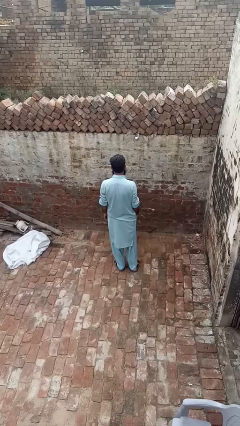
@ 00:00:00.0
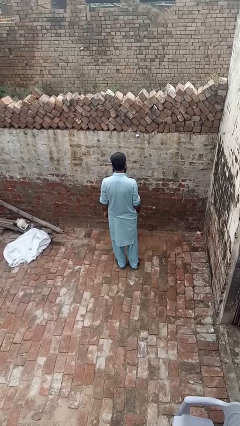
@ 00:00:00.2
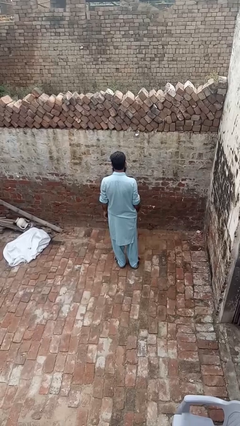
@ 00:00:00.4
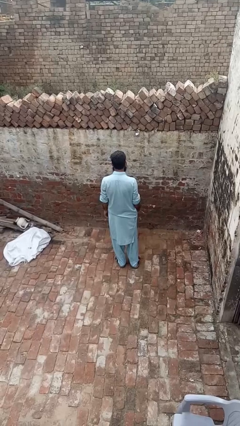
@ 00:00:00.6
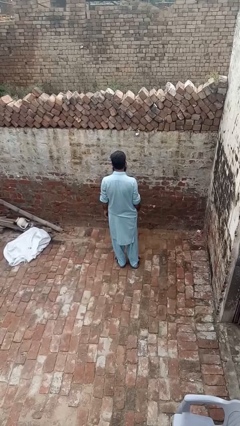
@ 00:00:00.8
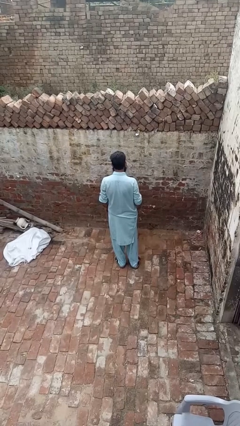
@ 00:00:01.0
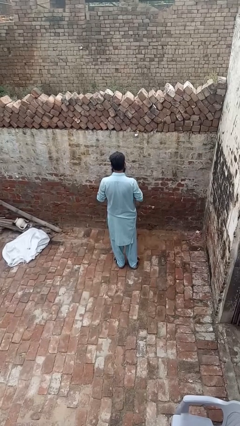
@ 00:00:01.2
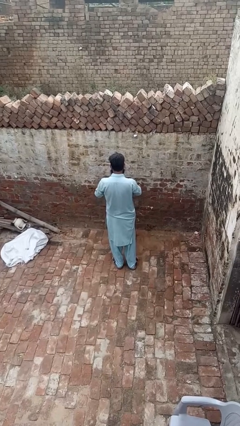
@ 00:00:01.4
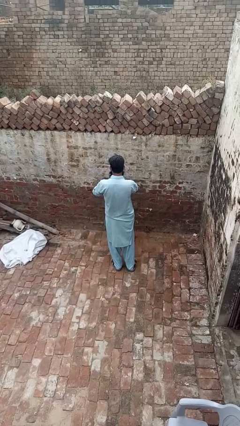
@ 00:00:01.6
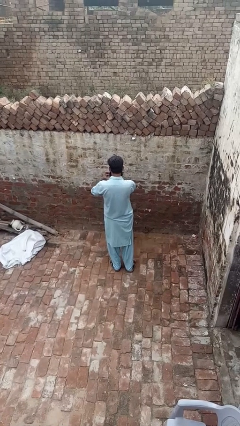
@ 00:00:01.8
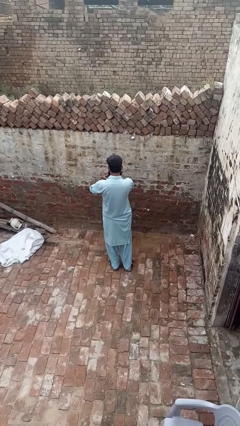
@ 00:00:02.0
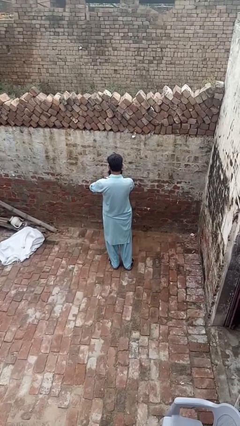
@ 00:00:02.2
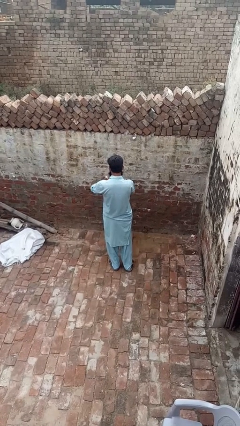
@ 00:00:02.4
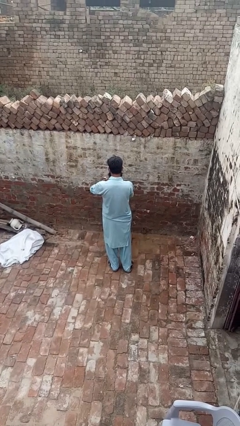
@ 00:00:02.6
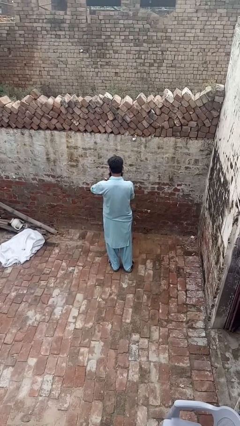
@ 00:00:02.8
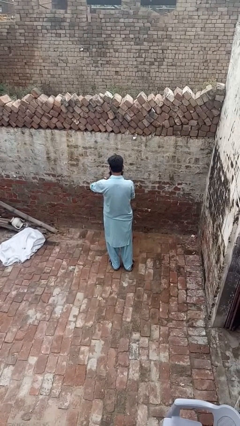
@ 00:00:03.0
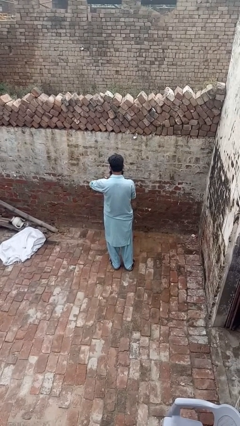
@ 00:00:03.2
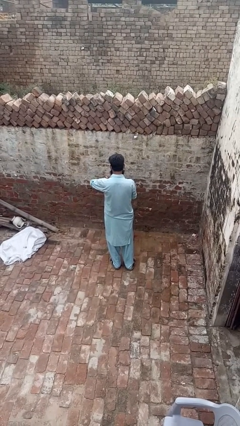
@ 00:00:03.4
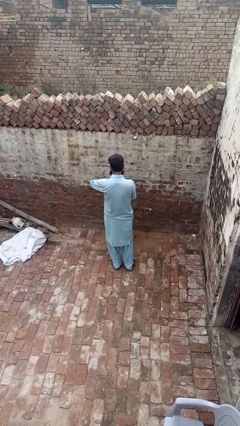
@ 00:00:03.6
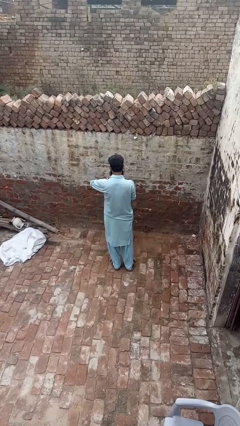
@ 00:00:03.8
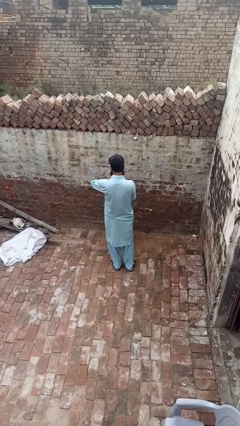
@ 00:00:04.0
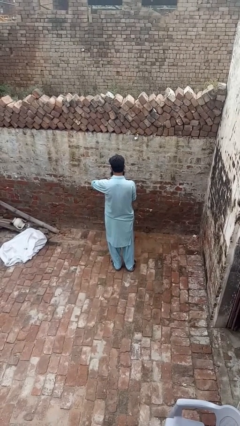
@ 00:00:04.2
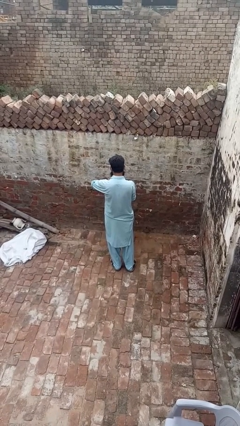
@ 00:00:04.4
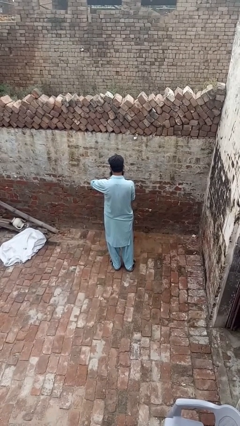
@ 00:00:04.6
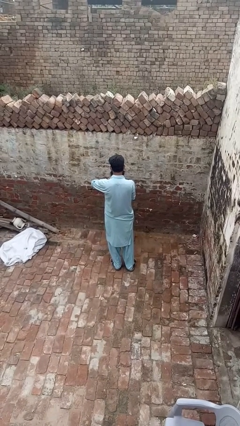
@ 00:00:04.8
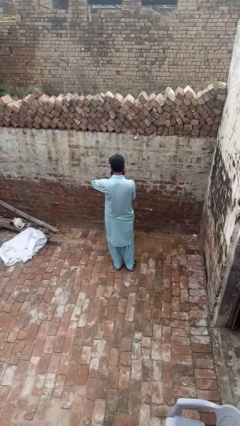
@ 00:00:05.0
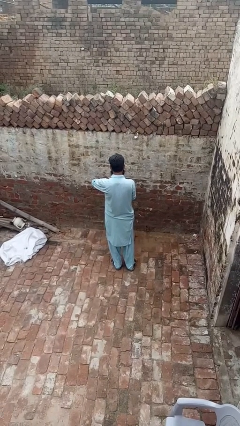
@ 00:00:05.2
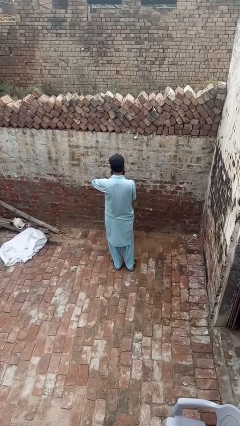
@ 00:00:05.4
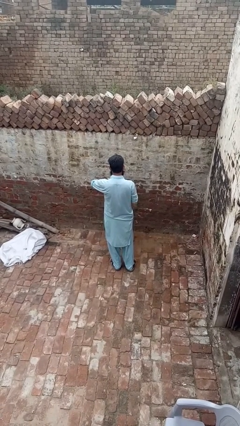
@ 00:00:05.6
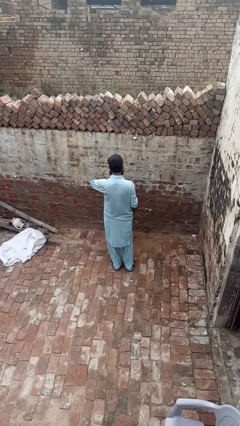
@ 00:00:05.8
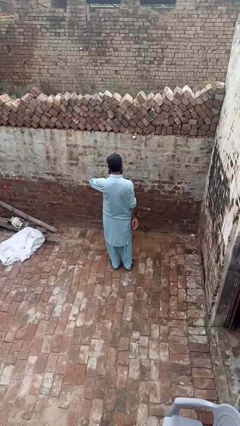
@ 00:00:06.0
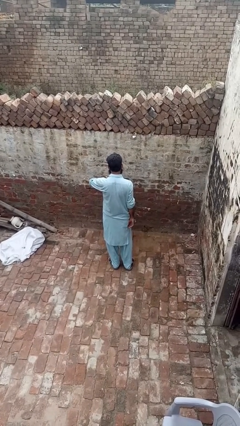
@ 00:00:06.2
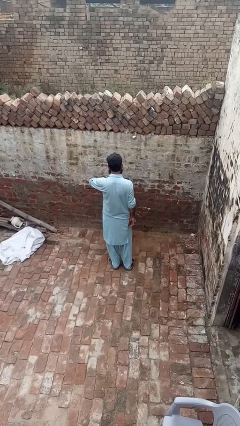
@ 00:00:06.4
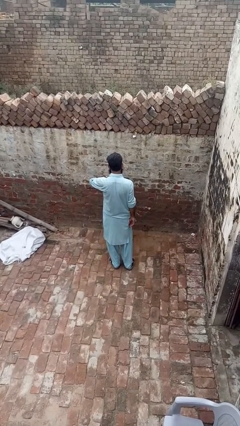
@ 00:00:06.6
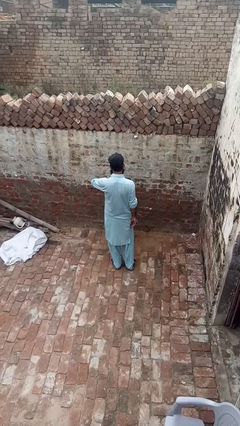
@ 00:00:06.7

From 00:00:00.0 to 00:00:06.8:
person puts on wristwatch

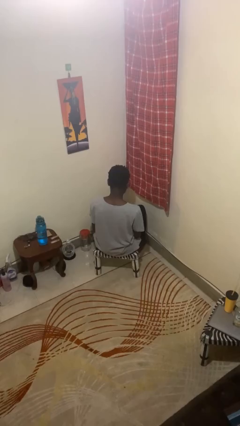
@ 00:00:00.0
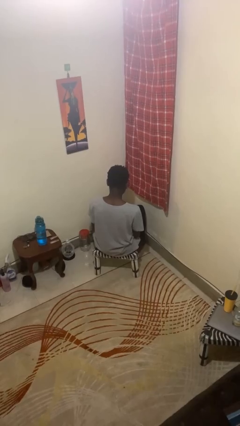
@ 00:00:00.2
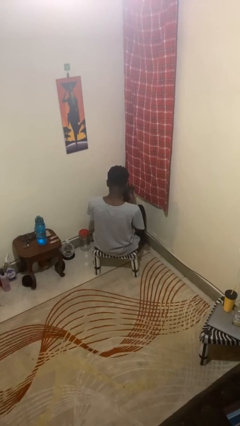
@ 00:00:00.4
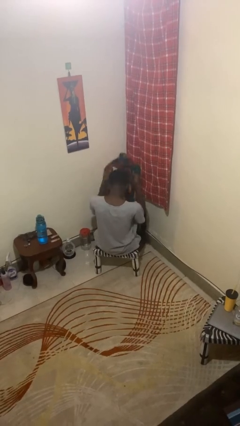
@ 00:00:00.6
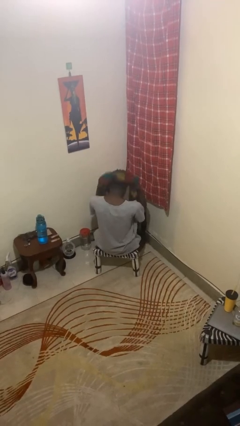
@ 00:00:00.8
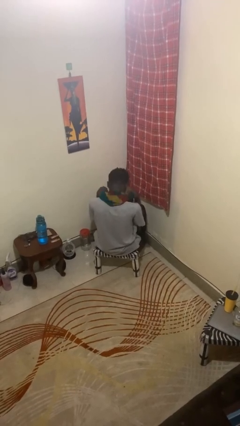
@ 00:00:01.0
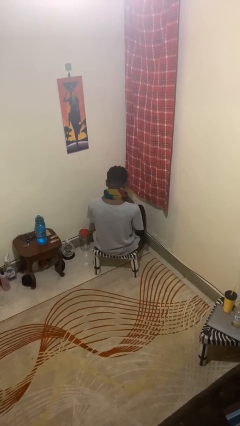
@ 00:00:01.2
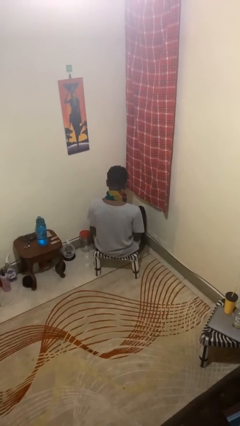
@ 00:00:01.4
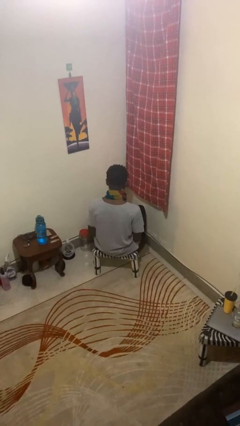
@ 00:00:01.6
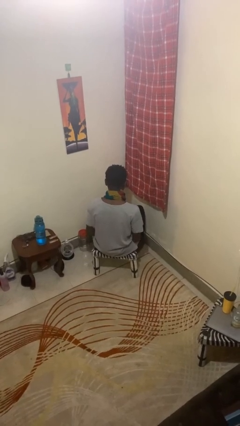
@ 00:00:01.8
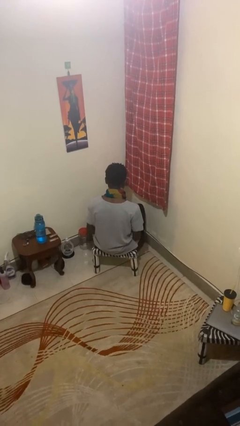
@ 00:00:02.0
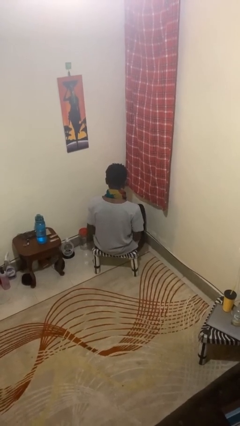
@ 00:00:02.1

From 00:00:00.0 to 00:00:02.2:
person puts on scarf

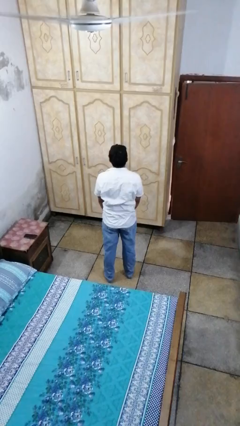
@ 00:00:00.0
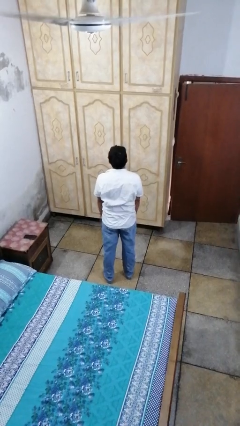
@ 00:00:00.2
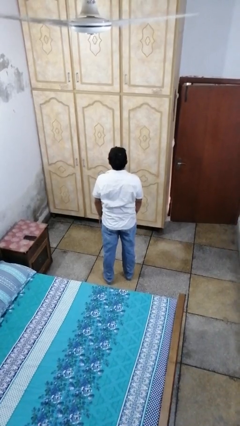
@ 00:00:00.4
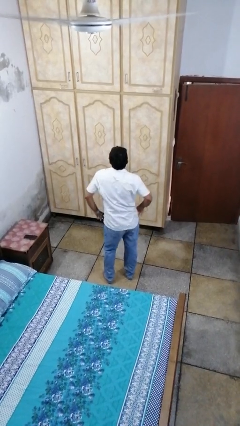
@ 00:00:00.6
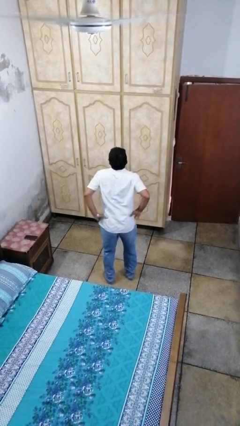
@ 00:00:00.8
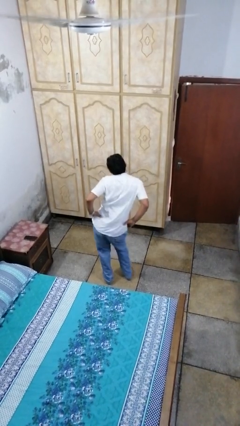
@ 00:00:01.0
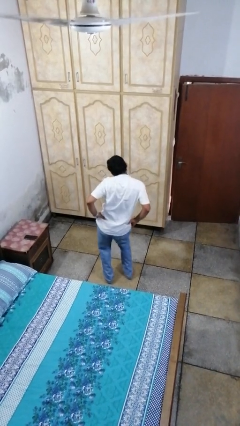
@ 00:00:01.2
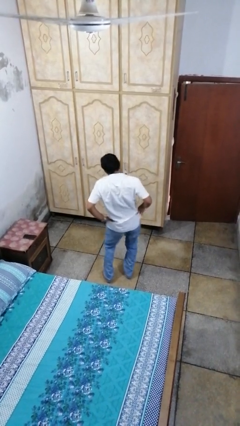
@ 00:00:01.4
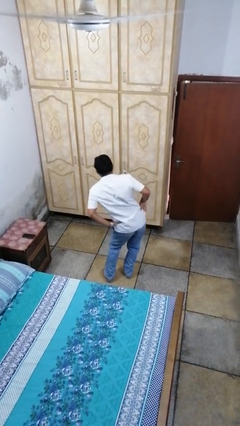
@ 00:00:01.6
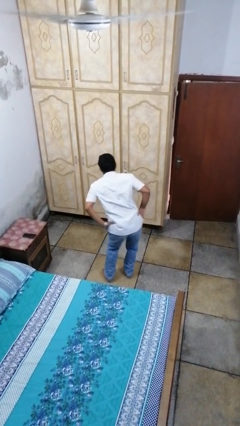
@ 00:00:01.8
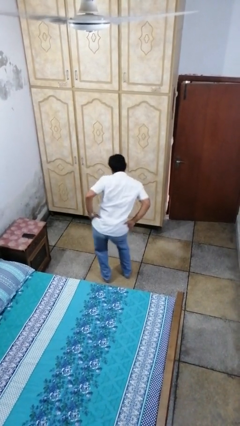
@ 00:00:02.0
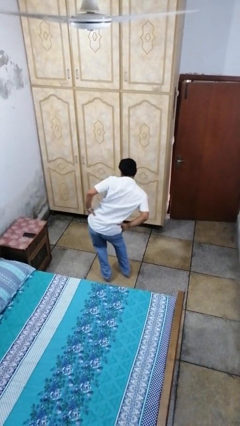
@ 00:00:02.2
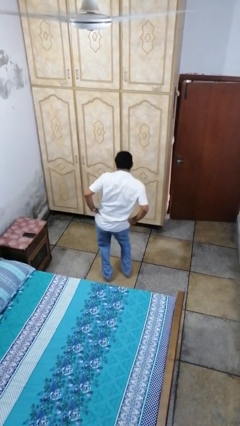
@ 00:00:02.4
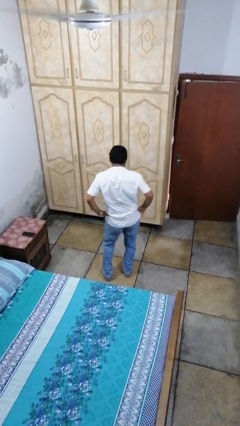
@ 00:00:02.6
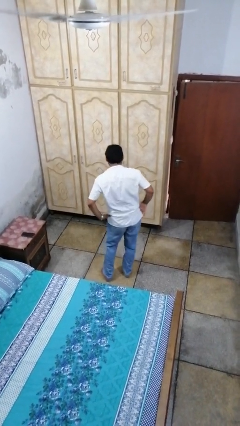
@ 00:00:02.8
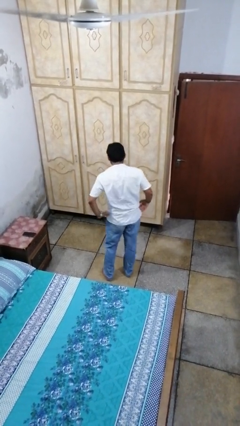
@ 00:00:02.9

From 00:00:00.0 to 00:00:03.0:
person wiggles hips

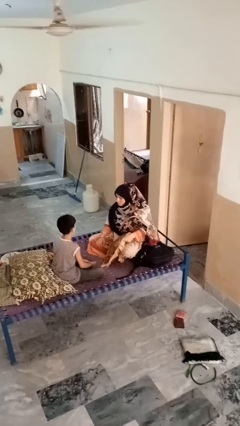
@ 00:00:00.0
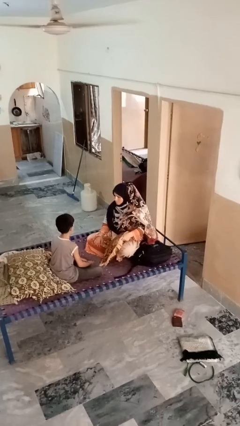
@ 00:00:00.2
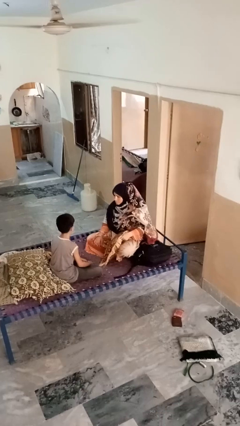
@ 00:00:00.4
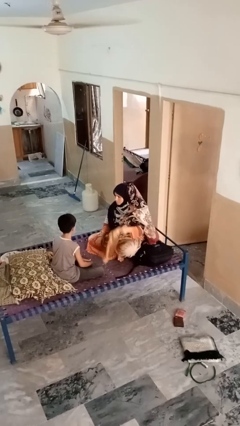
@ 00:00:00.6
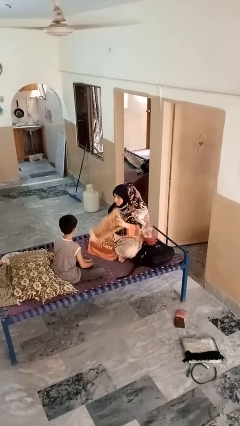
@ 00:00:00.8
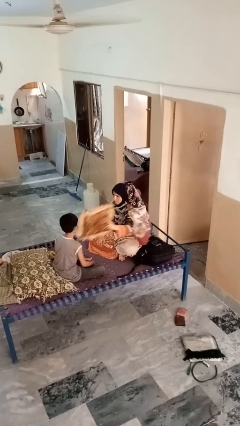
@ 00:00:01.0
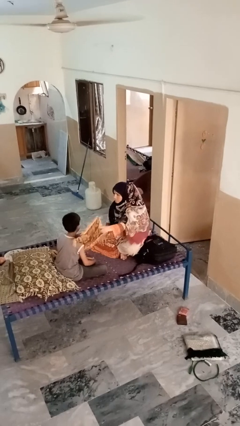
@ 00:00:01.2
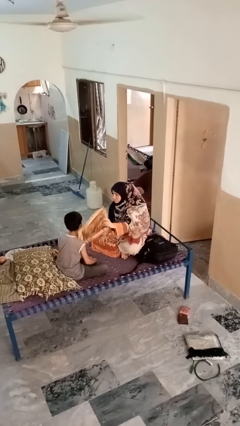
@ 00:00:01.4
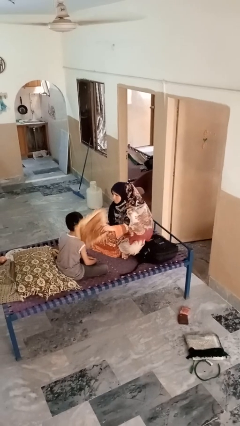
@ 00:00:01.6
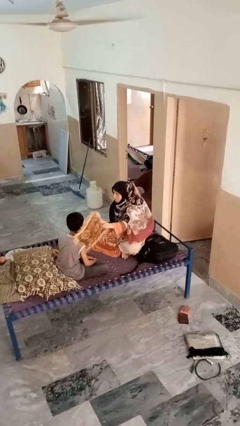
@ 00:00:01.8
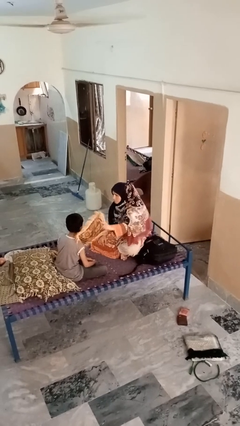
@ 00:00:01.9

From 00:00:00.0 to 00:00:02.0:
person hits person with pillow

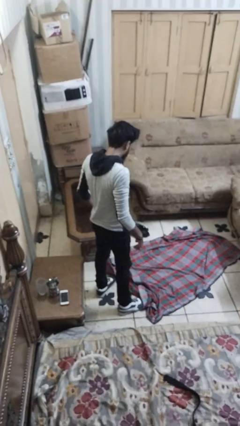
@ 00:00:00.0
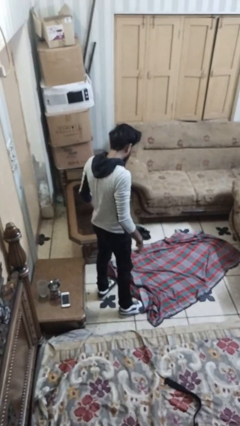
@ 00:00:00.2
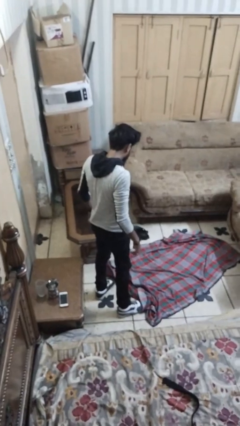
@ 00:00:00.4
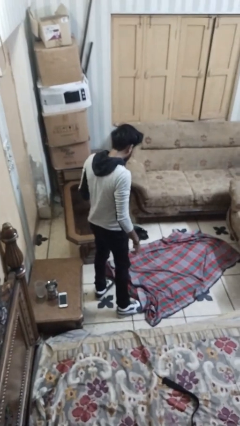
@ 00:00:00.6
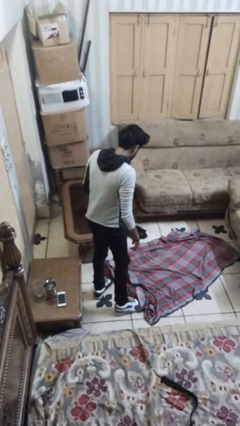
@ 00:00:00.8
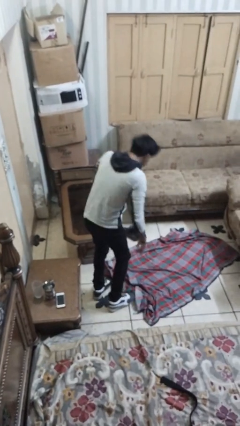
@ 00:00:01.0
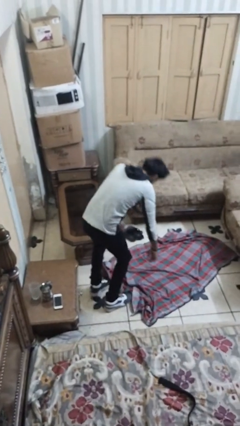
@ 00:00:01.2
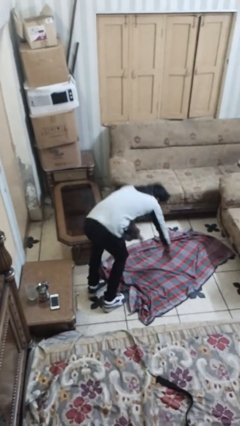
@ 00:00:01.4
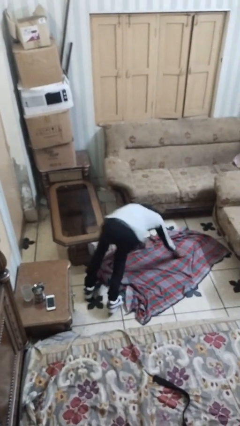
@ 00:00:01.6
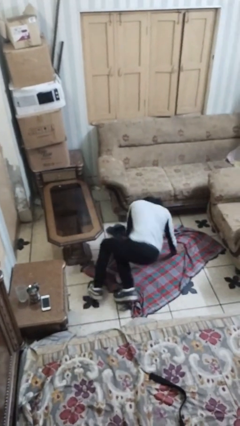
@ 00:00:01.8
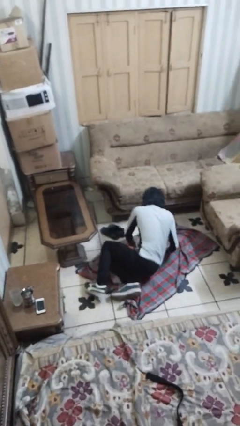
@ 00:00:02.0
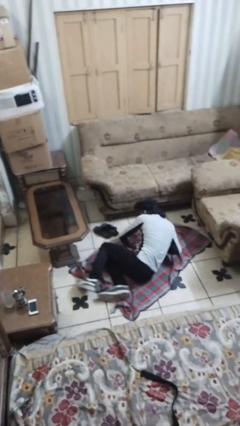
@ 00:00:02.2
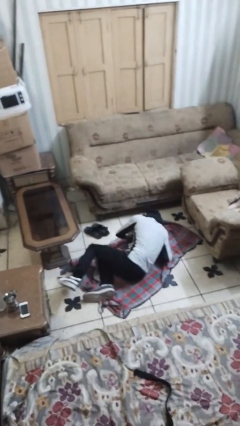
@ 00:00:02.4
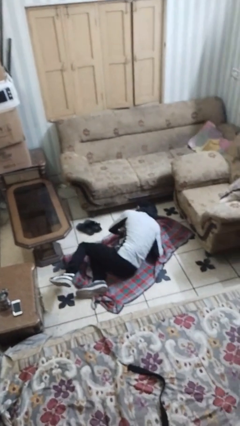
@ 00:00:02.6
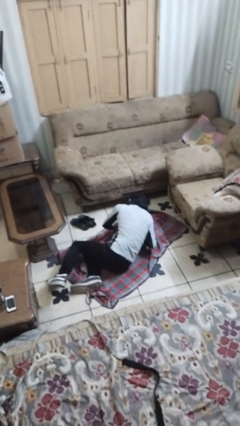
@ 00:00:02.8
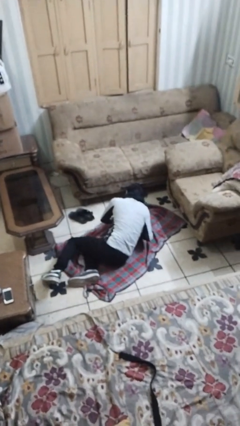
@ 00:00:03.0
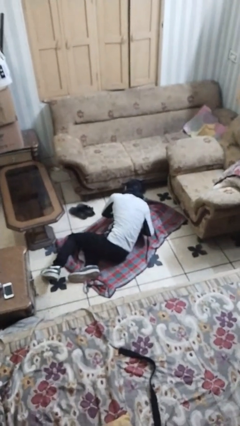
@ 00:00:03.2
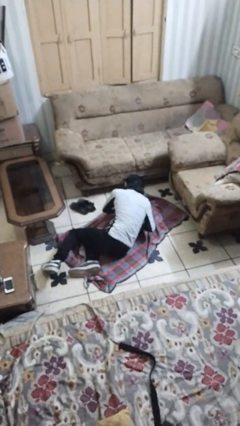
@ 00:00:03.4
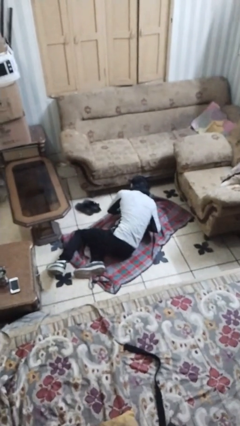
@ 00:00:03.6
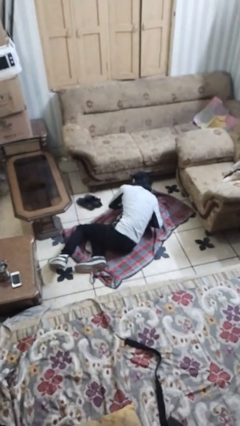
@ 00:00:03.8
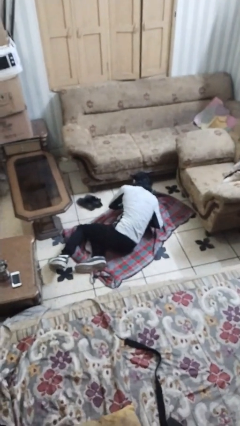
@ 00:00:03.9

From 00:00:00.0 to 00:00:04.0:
person trips on object on floor
